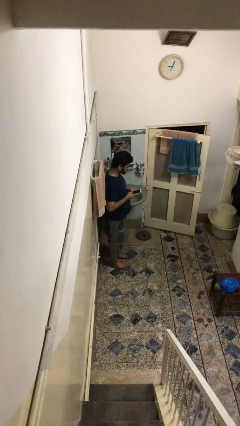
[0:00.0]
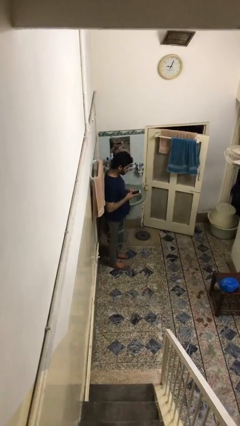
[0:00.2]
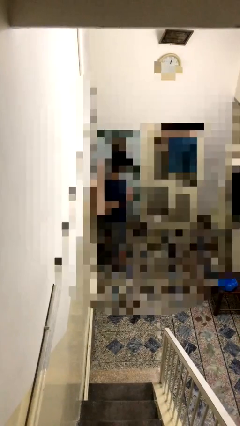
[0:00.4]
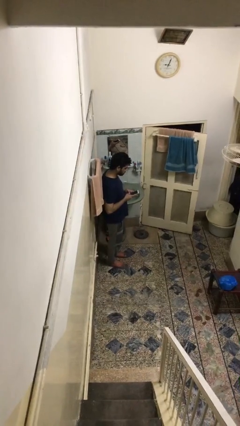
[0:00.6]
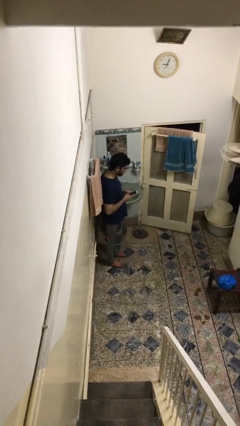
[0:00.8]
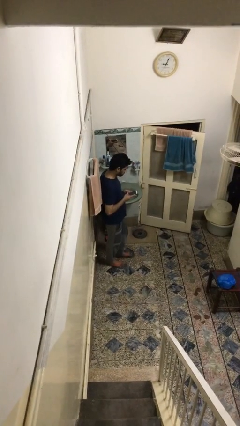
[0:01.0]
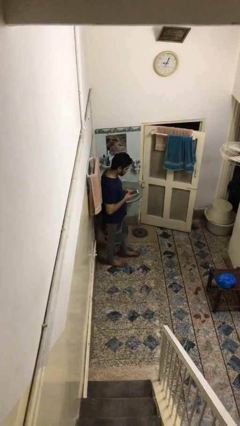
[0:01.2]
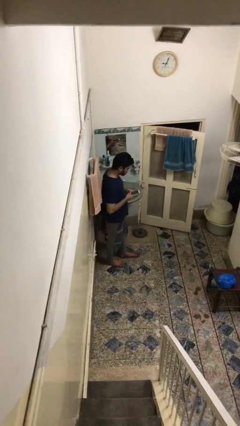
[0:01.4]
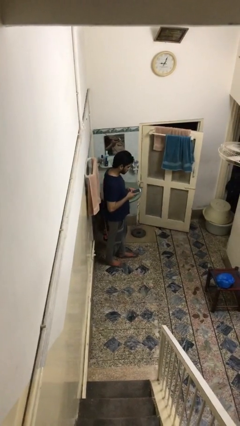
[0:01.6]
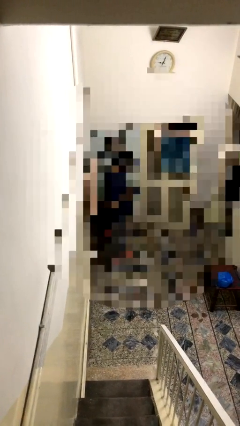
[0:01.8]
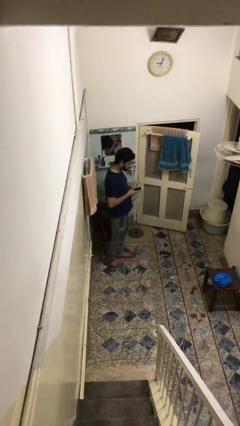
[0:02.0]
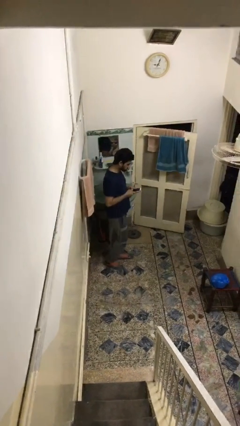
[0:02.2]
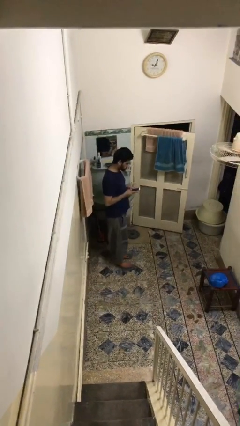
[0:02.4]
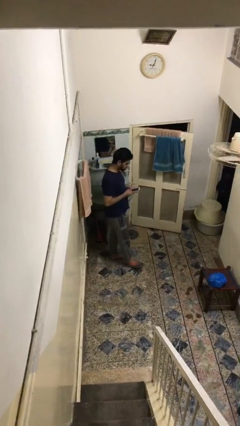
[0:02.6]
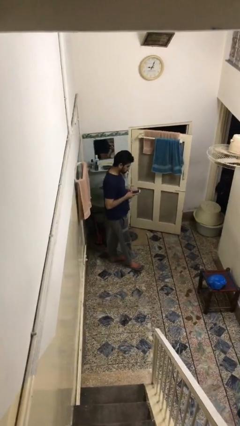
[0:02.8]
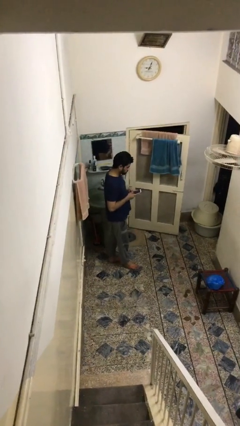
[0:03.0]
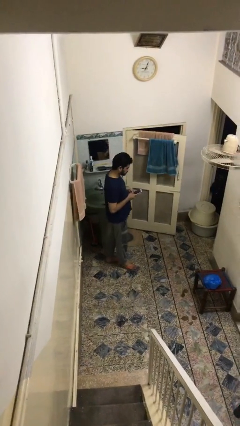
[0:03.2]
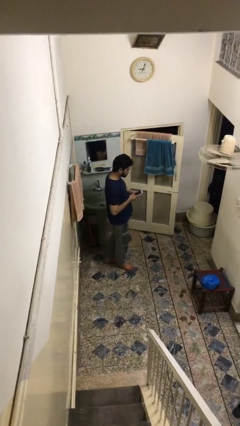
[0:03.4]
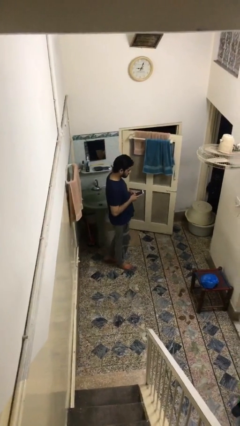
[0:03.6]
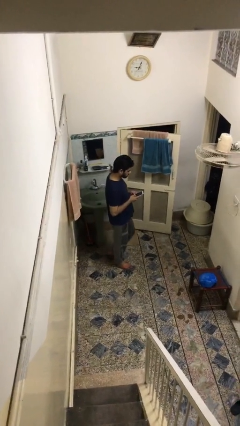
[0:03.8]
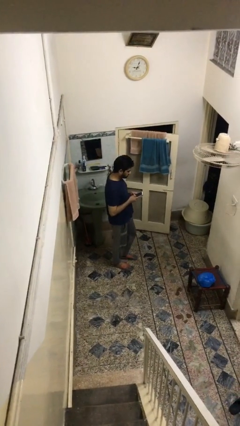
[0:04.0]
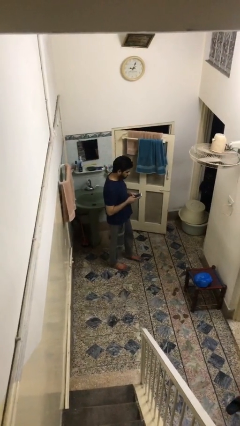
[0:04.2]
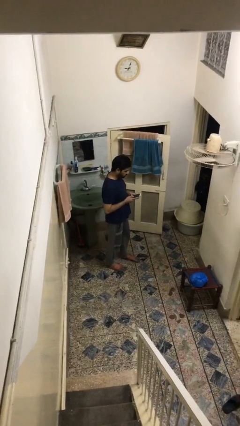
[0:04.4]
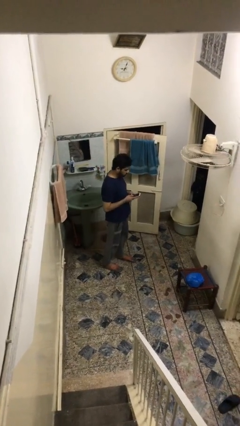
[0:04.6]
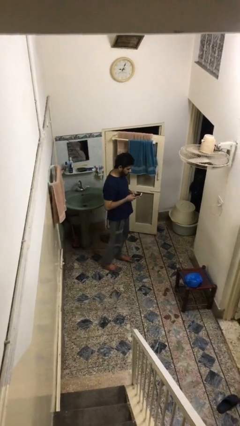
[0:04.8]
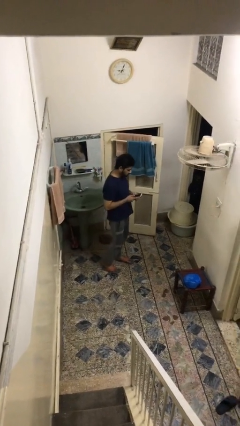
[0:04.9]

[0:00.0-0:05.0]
person texts on phone

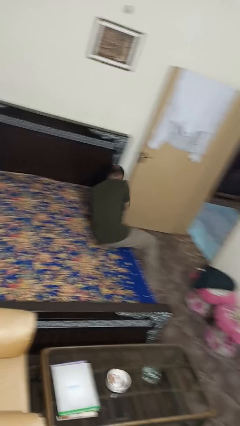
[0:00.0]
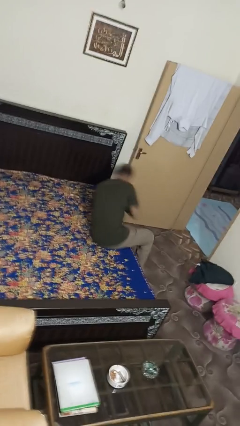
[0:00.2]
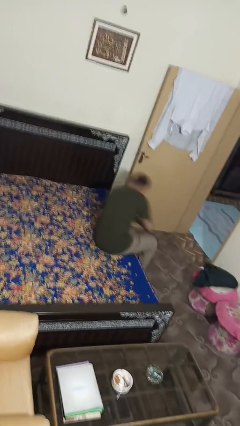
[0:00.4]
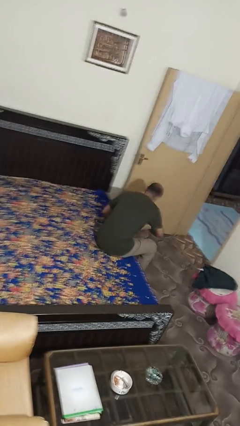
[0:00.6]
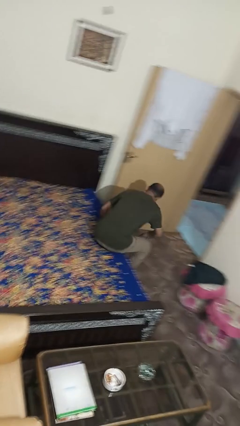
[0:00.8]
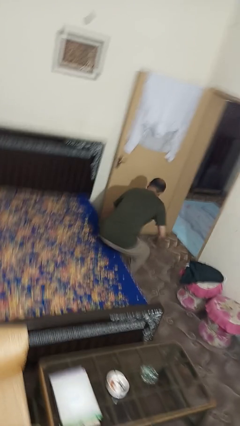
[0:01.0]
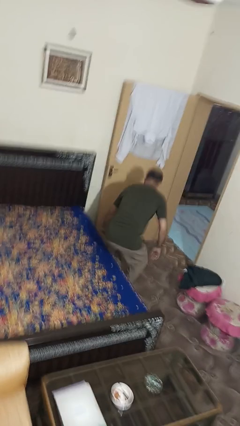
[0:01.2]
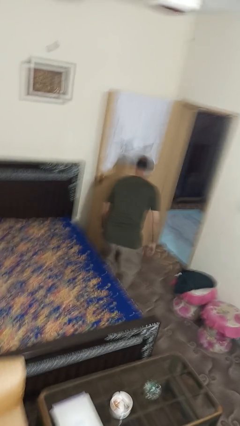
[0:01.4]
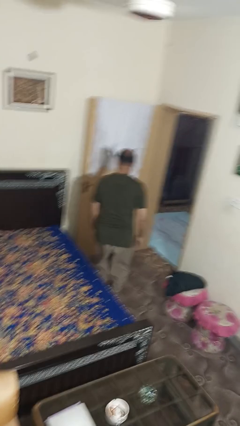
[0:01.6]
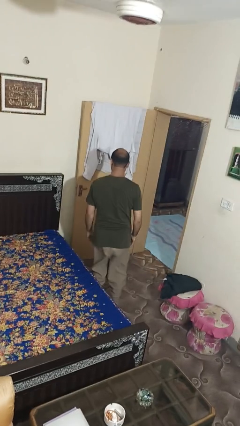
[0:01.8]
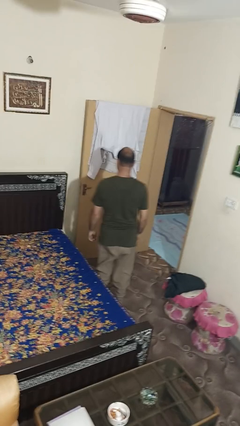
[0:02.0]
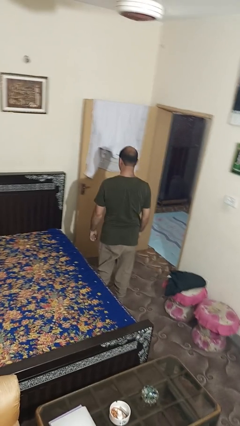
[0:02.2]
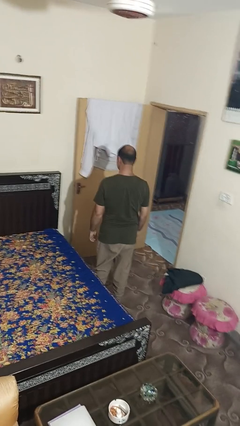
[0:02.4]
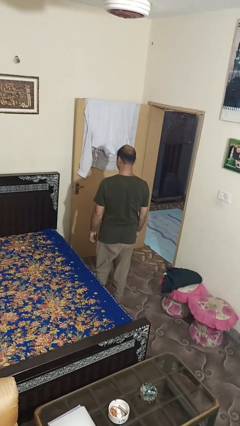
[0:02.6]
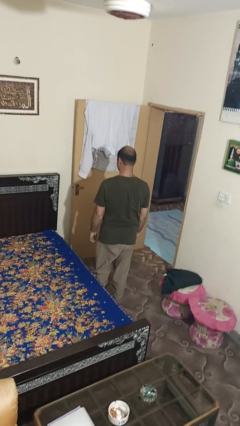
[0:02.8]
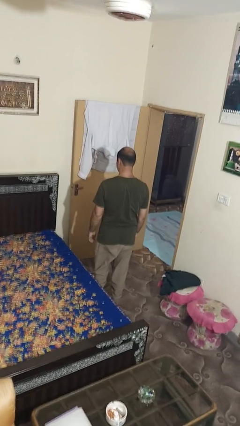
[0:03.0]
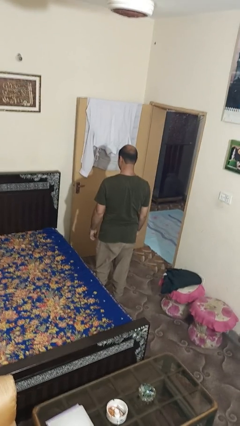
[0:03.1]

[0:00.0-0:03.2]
person stands up

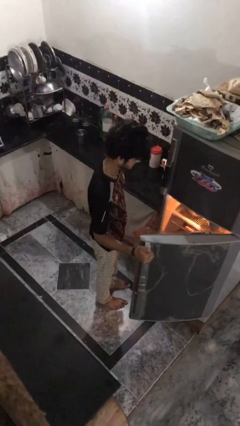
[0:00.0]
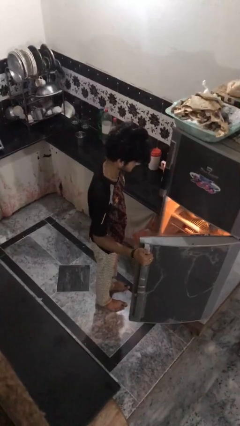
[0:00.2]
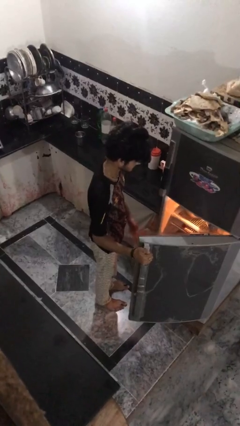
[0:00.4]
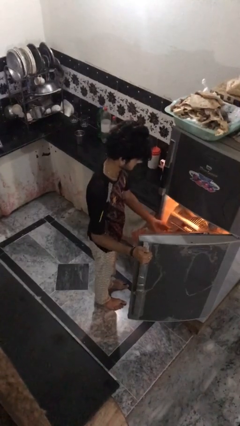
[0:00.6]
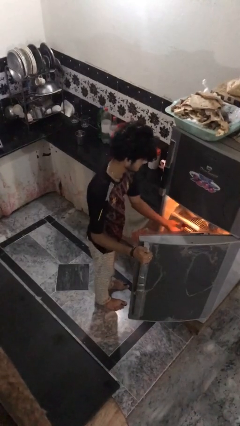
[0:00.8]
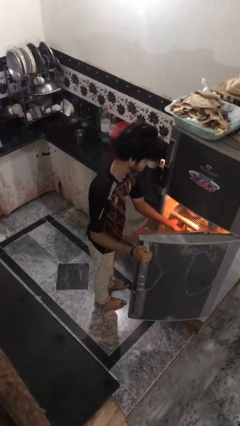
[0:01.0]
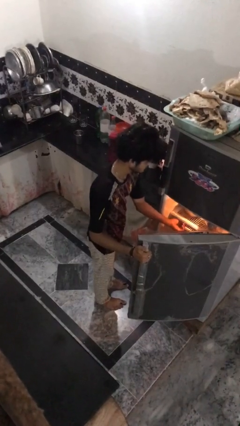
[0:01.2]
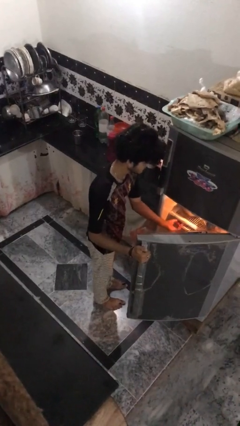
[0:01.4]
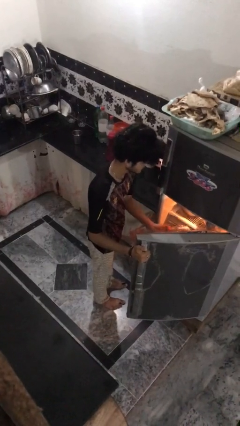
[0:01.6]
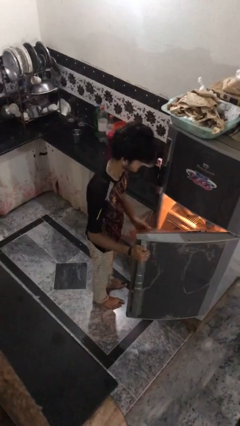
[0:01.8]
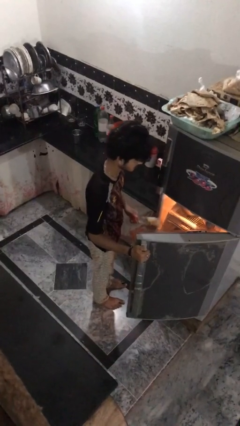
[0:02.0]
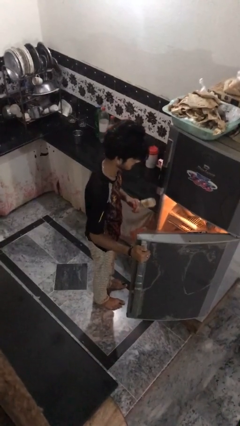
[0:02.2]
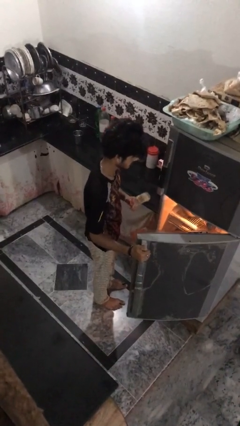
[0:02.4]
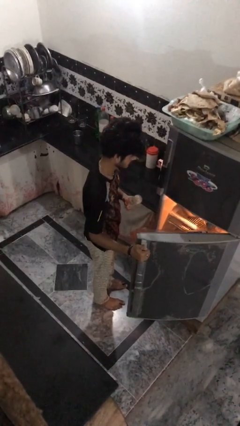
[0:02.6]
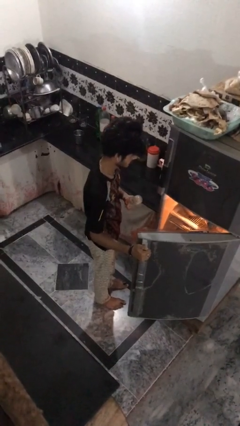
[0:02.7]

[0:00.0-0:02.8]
person takes object from refrigerator

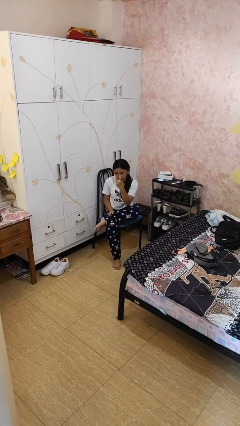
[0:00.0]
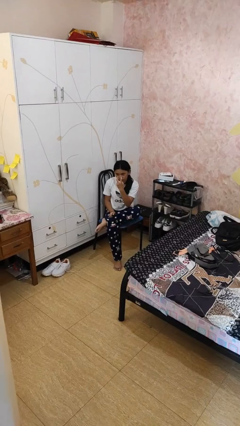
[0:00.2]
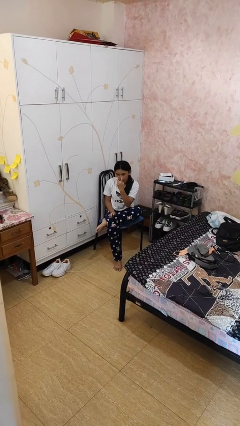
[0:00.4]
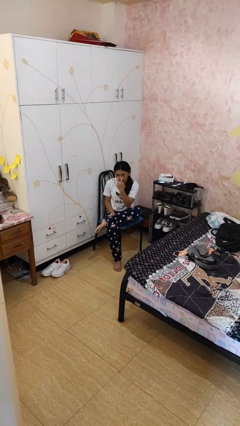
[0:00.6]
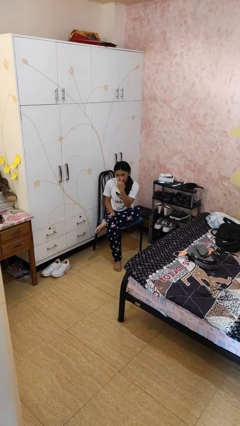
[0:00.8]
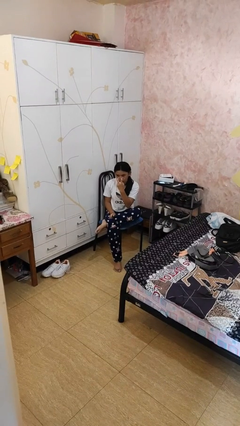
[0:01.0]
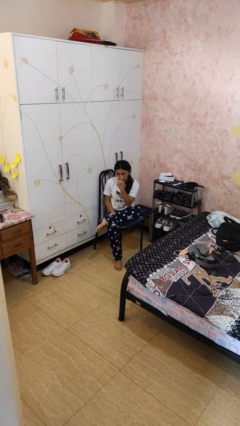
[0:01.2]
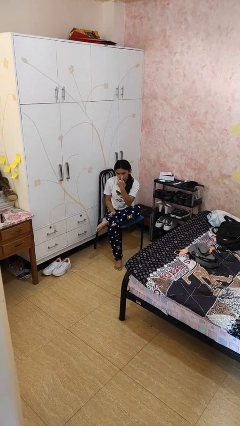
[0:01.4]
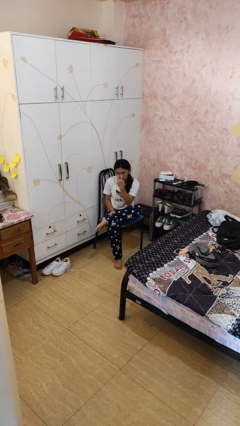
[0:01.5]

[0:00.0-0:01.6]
person gestures watch closely

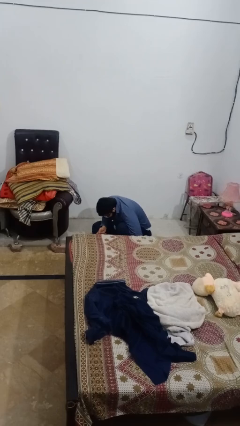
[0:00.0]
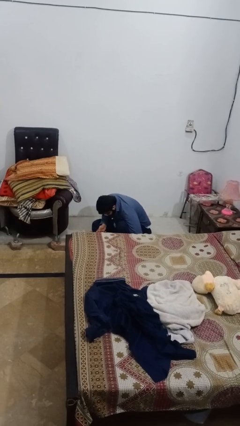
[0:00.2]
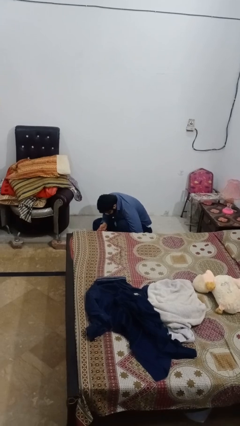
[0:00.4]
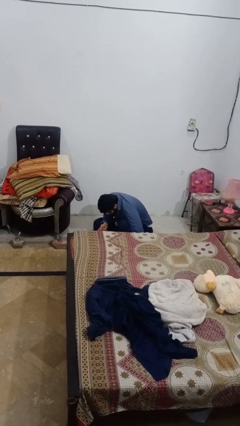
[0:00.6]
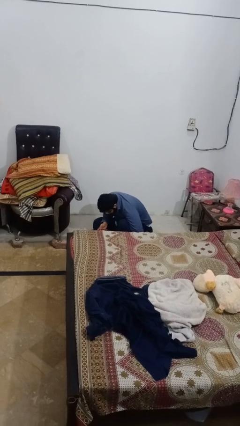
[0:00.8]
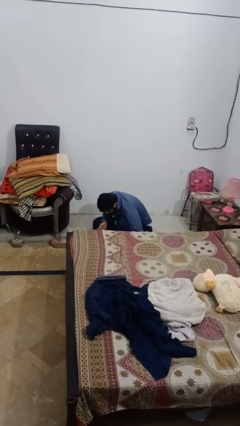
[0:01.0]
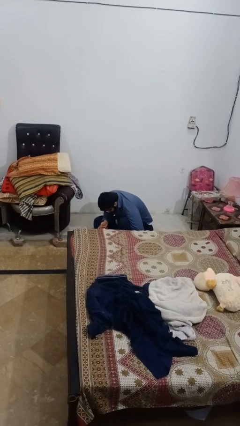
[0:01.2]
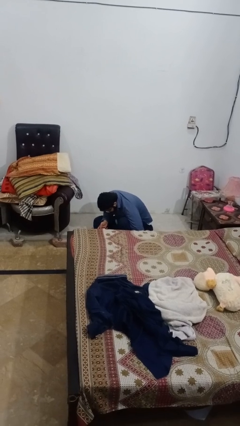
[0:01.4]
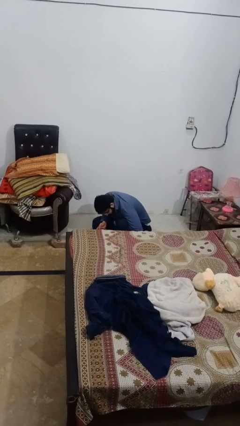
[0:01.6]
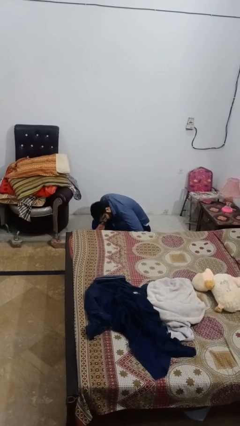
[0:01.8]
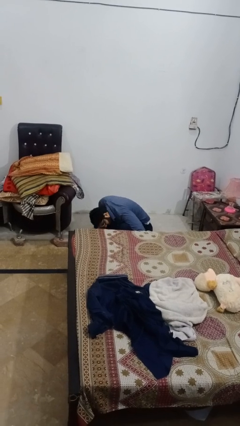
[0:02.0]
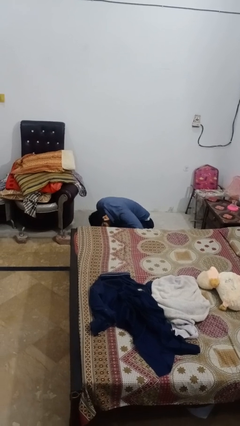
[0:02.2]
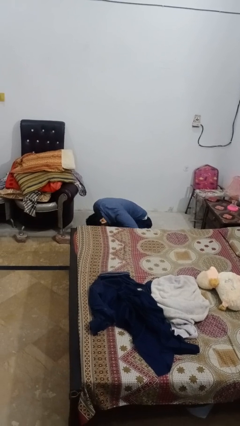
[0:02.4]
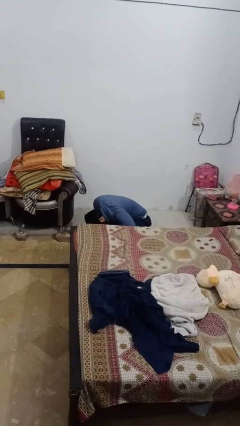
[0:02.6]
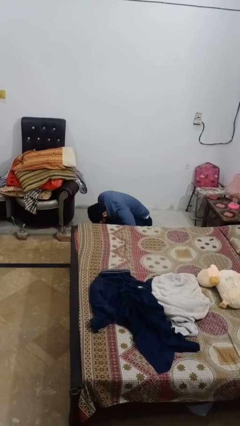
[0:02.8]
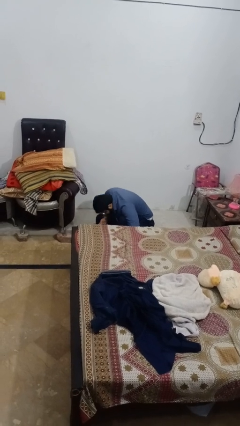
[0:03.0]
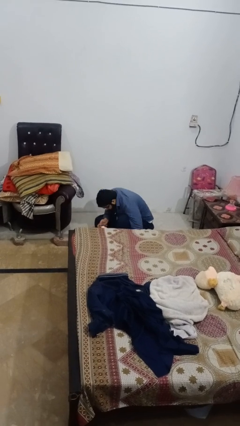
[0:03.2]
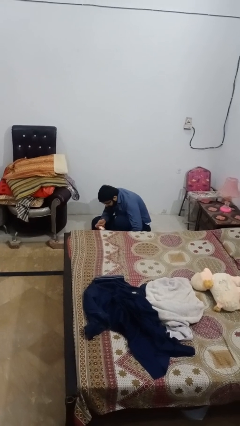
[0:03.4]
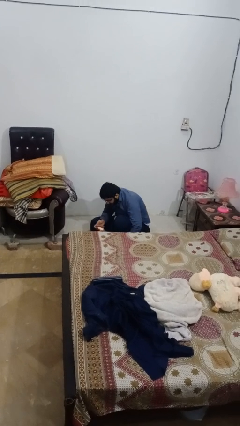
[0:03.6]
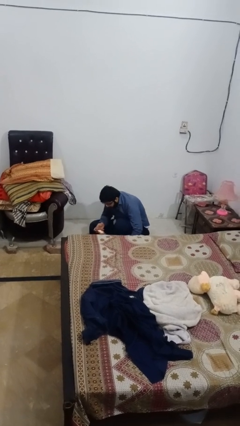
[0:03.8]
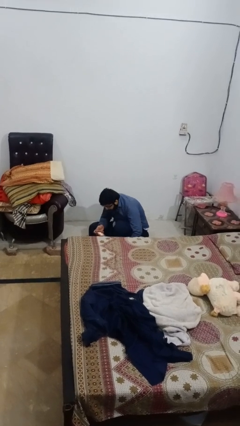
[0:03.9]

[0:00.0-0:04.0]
person searches under bed

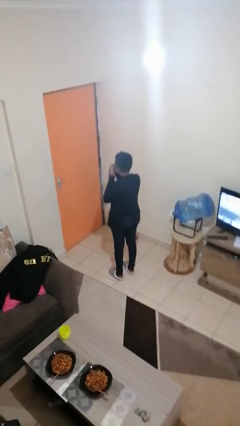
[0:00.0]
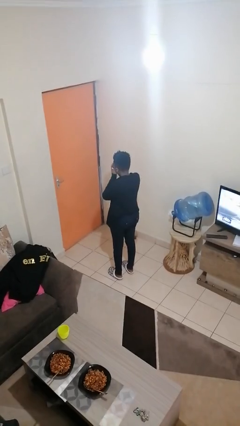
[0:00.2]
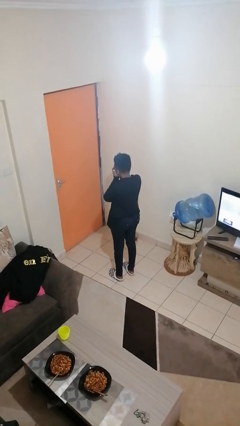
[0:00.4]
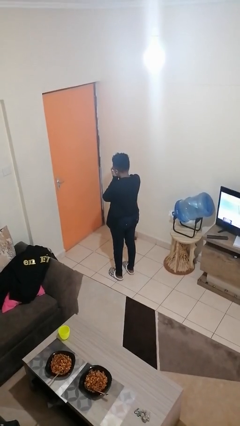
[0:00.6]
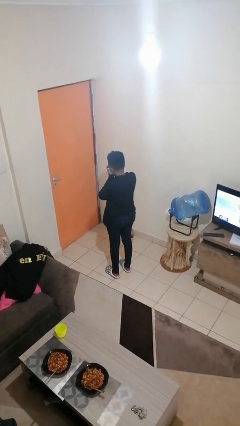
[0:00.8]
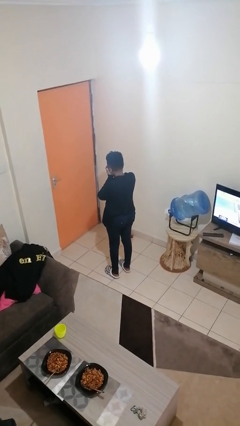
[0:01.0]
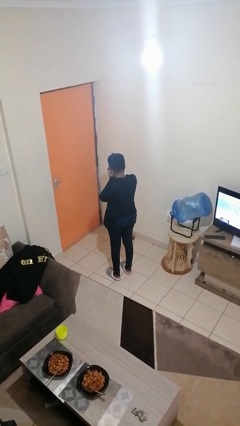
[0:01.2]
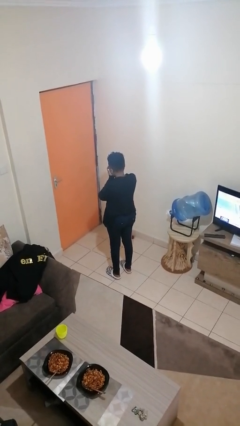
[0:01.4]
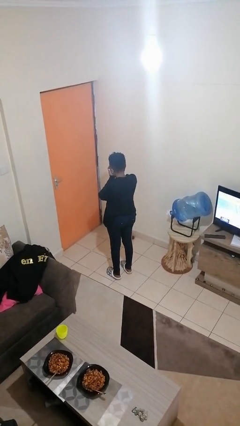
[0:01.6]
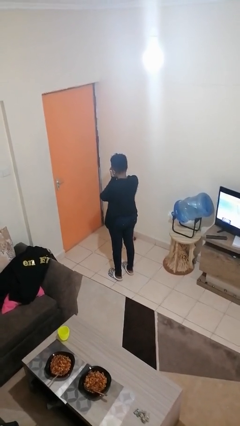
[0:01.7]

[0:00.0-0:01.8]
person covers face with hands
